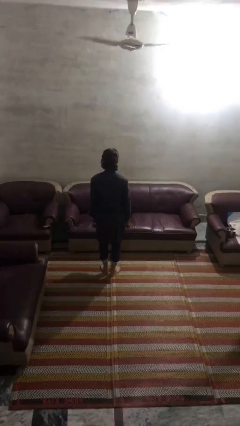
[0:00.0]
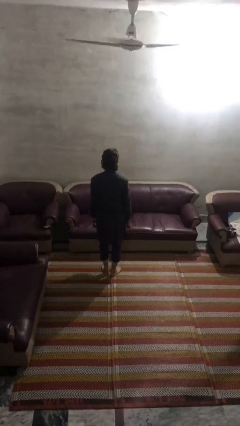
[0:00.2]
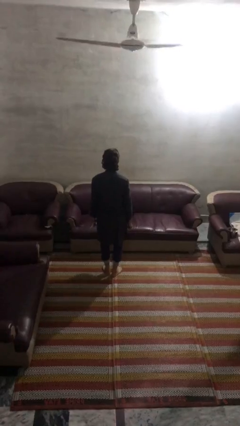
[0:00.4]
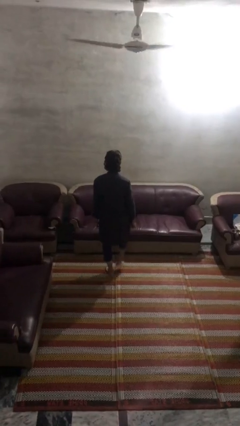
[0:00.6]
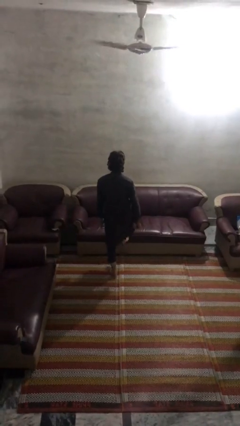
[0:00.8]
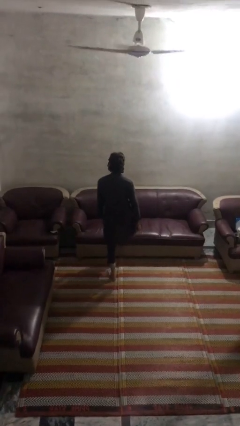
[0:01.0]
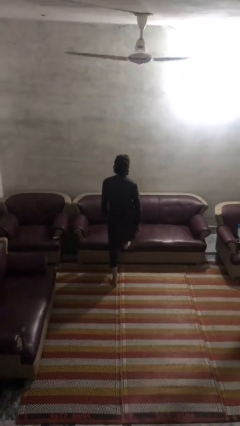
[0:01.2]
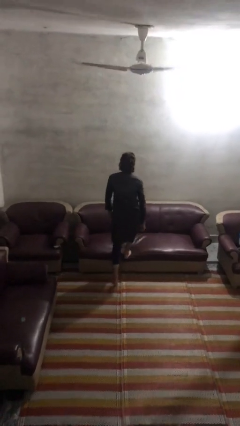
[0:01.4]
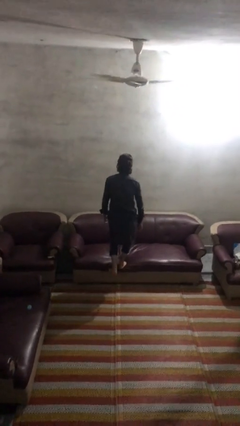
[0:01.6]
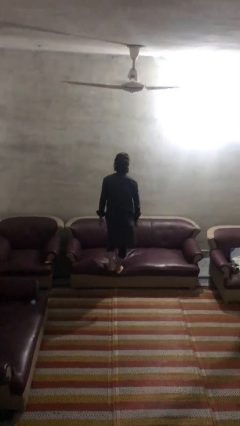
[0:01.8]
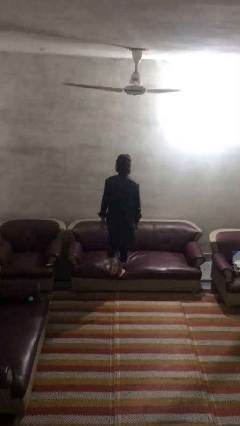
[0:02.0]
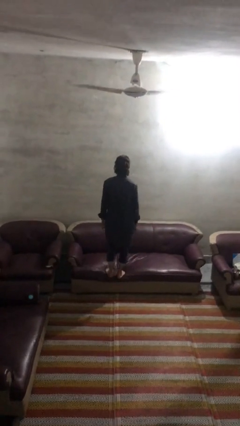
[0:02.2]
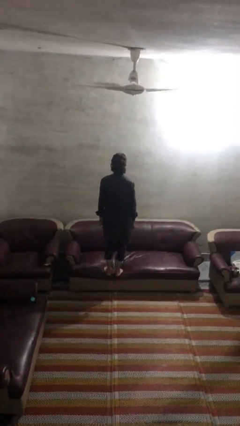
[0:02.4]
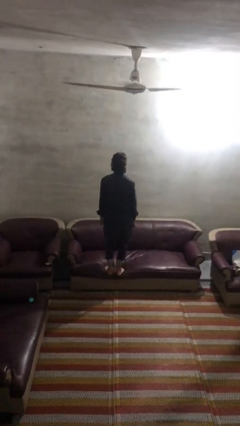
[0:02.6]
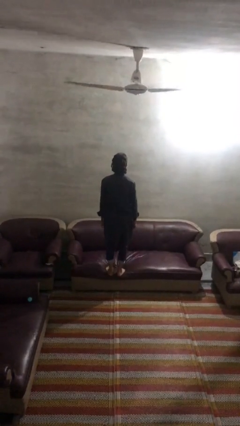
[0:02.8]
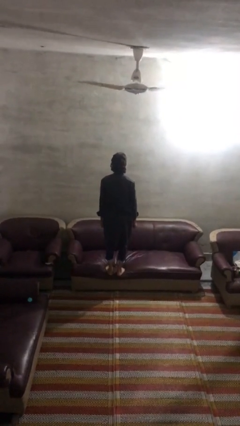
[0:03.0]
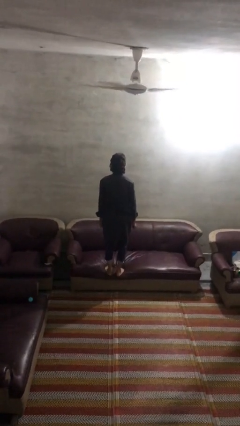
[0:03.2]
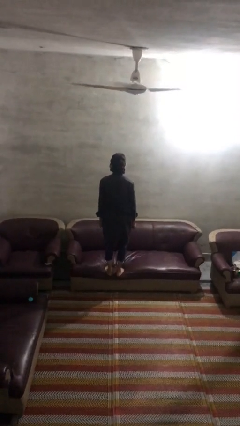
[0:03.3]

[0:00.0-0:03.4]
person climbs on couch

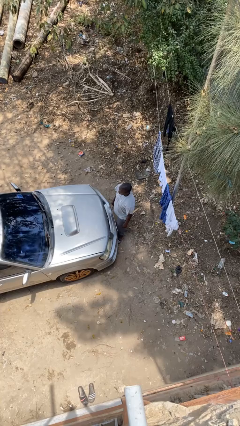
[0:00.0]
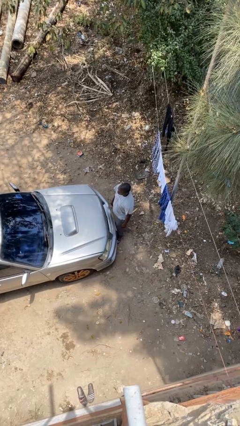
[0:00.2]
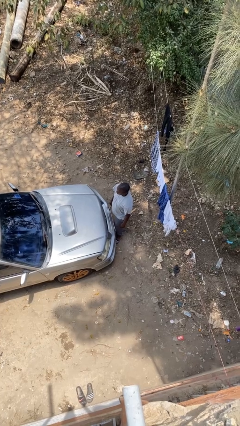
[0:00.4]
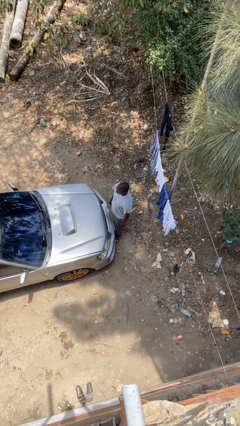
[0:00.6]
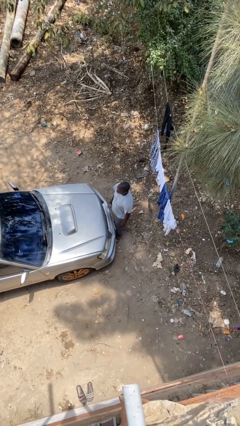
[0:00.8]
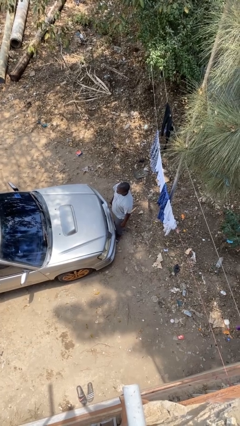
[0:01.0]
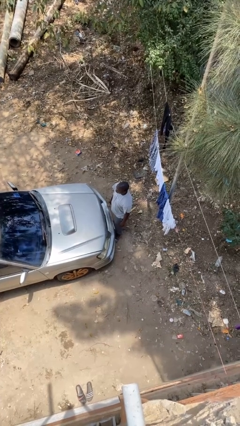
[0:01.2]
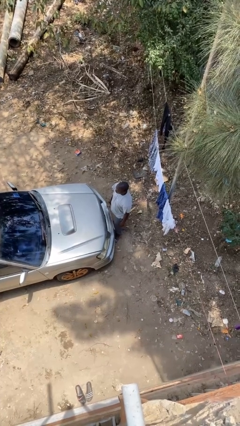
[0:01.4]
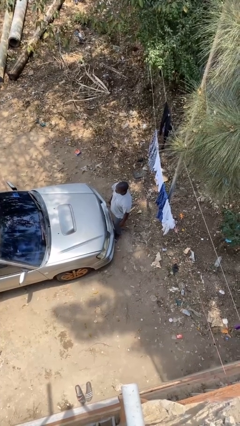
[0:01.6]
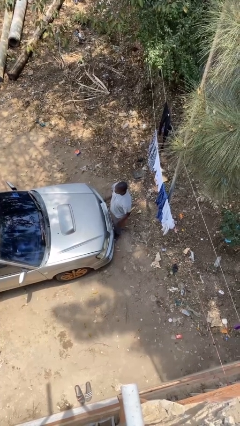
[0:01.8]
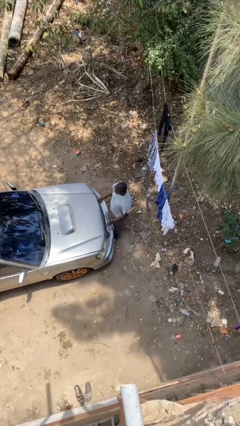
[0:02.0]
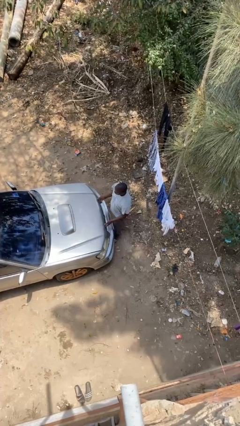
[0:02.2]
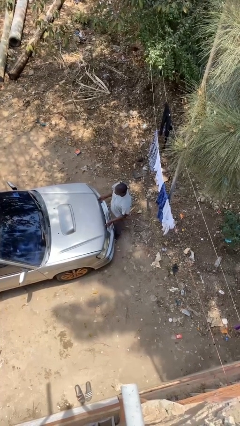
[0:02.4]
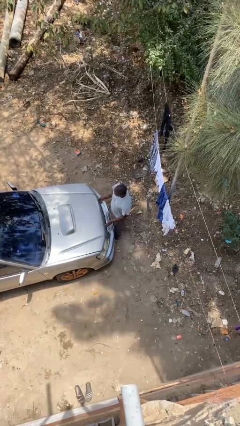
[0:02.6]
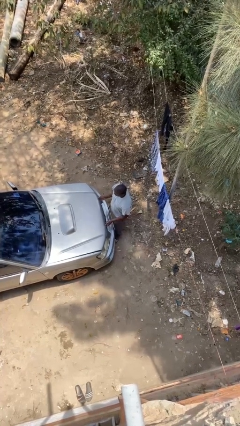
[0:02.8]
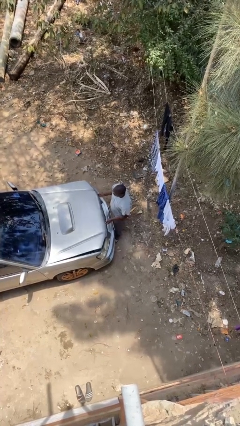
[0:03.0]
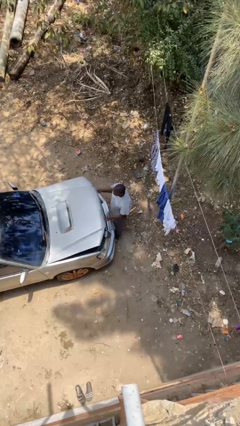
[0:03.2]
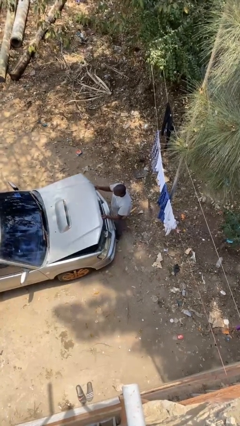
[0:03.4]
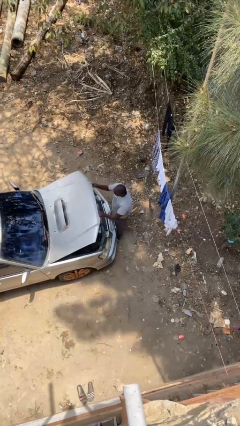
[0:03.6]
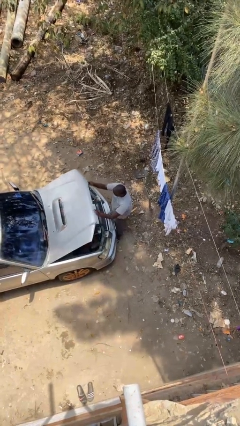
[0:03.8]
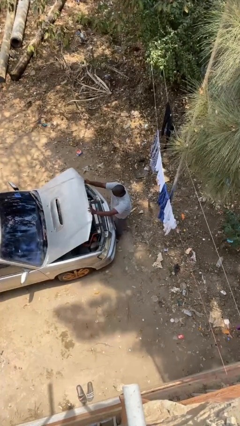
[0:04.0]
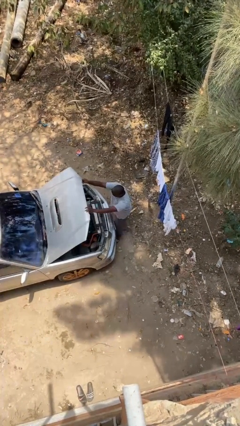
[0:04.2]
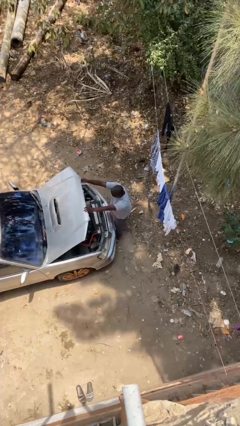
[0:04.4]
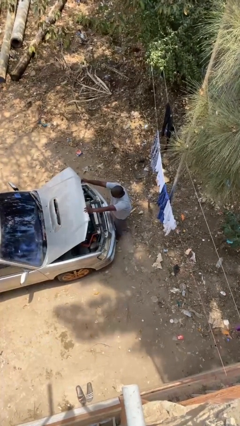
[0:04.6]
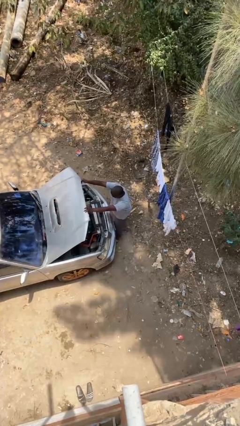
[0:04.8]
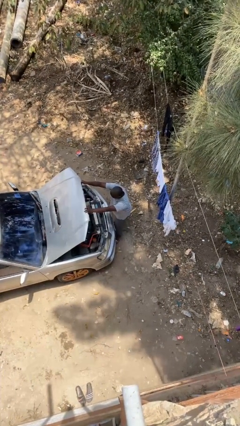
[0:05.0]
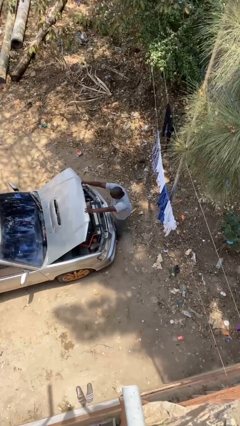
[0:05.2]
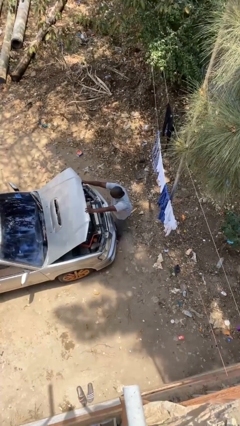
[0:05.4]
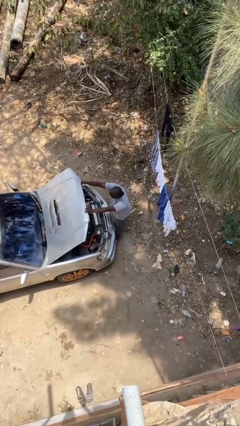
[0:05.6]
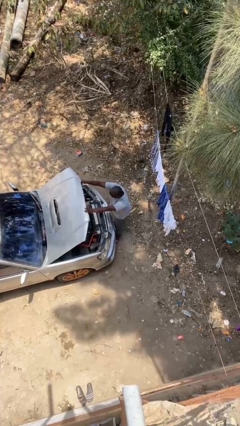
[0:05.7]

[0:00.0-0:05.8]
person opens car hood

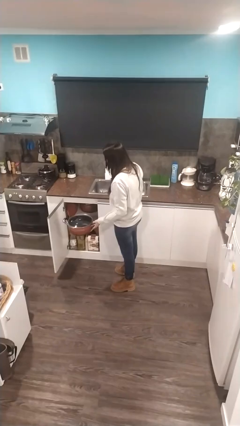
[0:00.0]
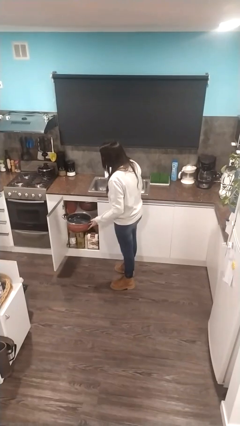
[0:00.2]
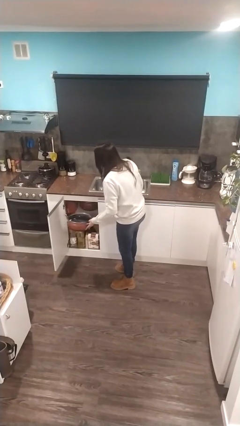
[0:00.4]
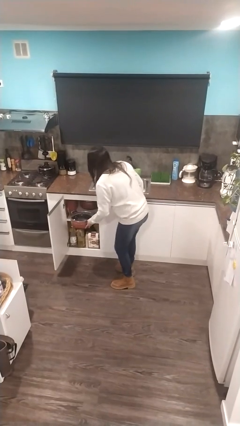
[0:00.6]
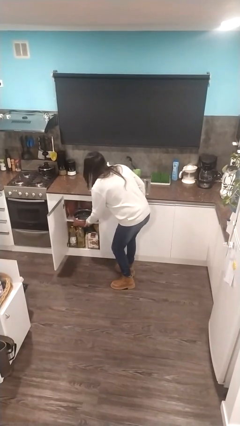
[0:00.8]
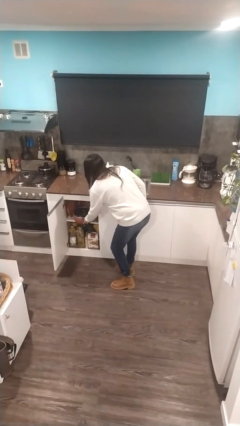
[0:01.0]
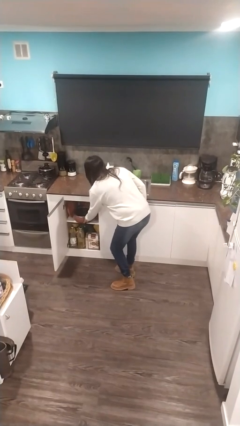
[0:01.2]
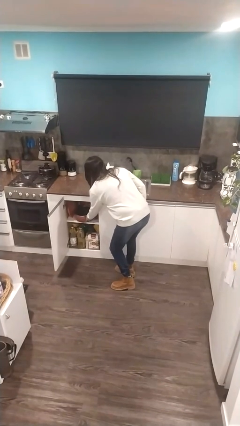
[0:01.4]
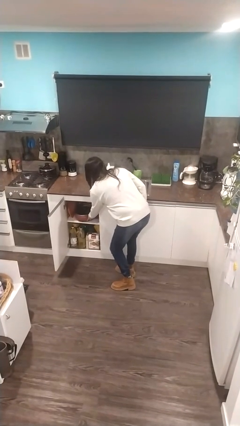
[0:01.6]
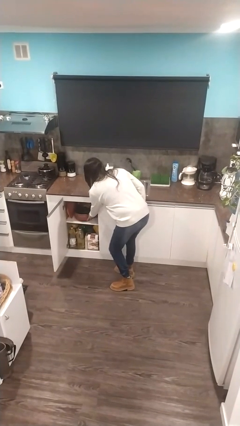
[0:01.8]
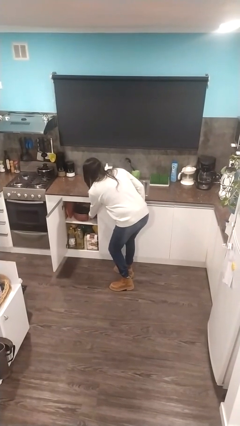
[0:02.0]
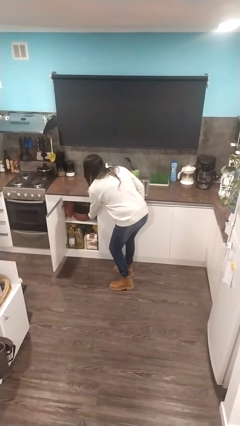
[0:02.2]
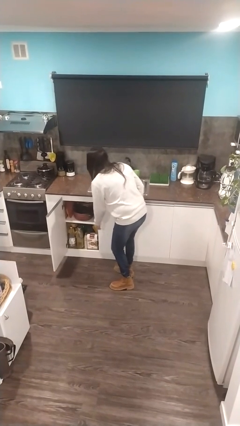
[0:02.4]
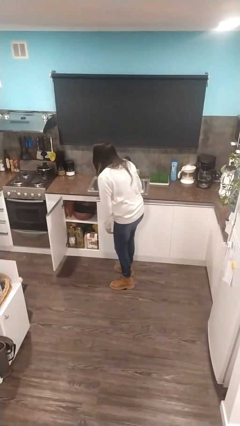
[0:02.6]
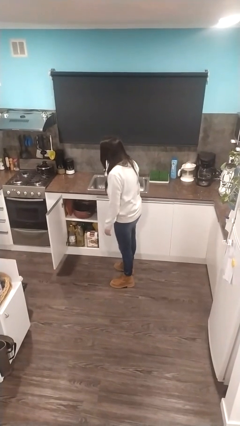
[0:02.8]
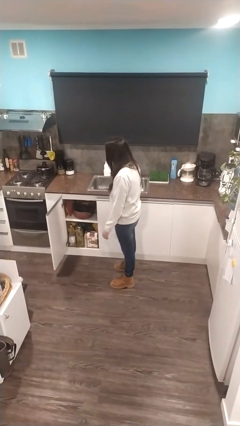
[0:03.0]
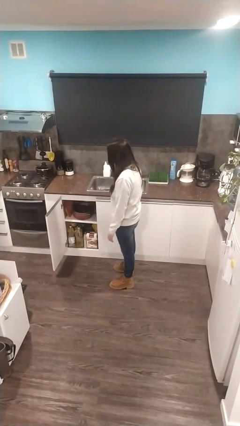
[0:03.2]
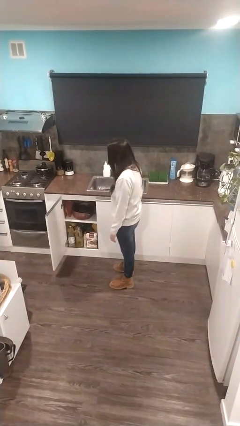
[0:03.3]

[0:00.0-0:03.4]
person puts down object into cabinet

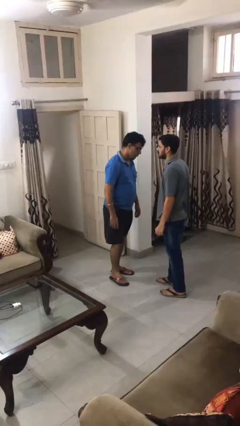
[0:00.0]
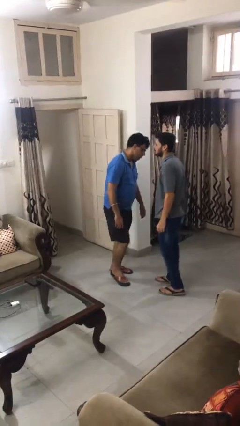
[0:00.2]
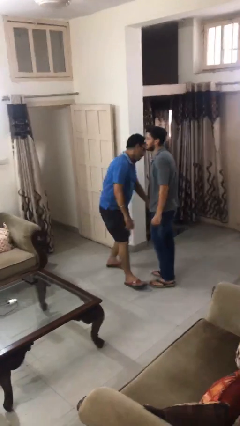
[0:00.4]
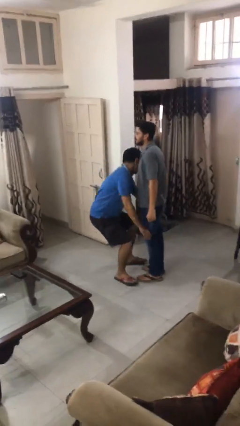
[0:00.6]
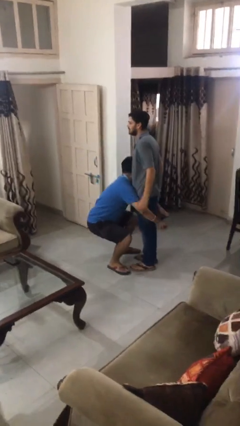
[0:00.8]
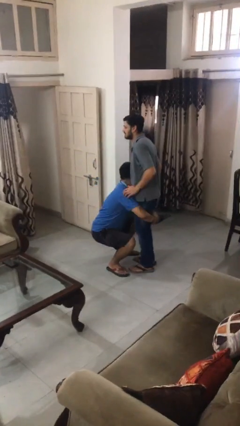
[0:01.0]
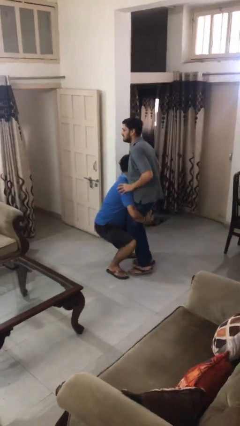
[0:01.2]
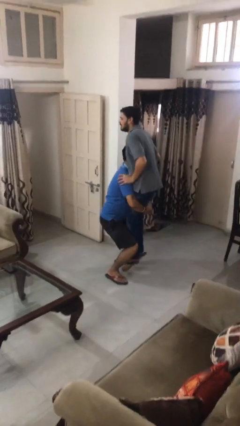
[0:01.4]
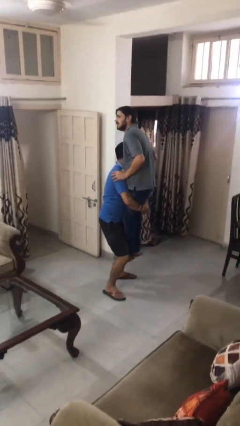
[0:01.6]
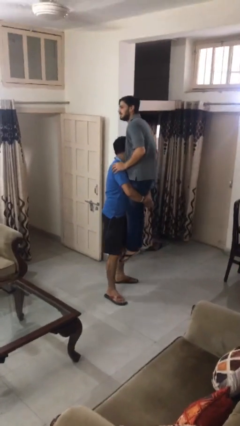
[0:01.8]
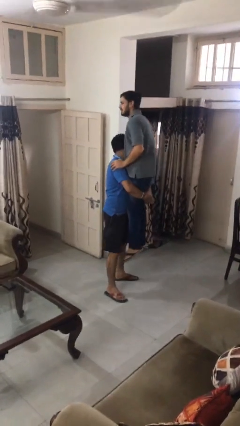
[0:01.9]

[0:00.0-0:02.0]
person picks up person

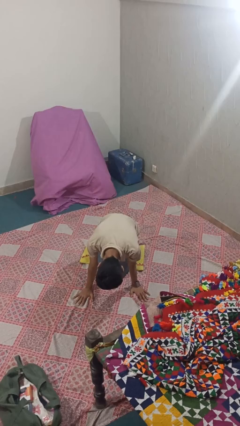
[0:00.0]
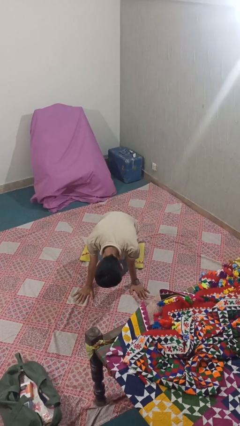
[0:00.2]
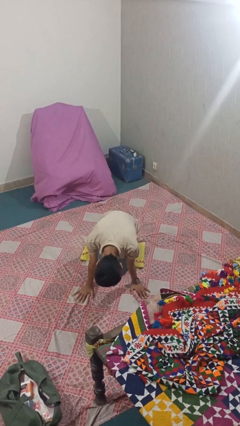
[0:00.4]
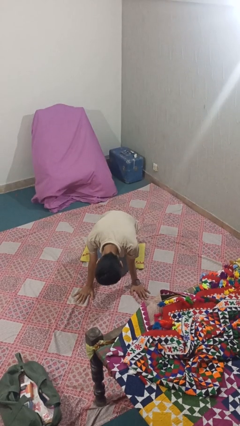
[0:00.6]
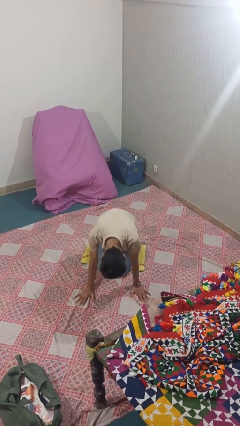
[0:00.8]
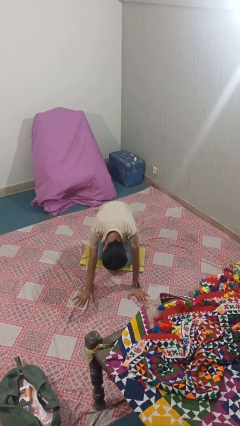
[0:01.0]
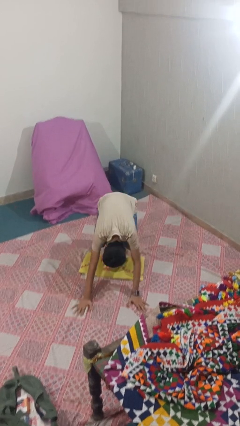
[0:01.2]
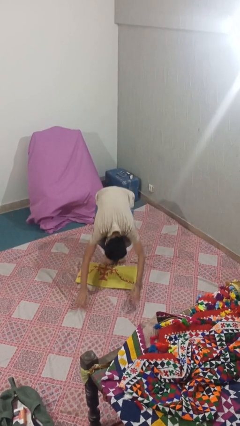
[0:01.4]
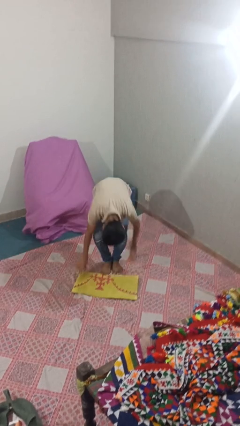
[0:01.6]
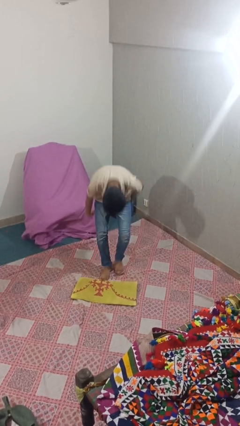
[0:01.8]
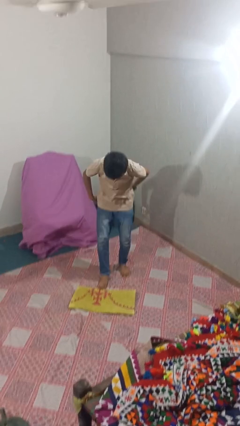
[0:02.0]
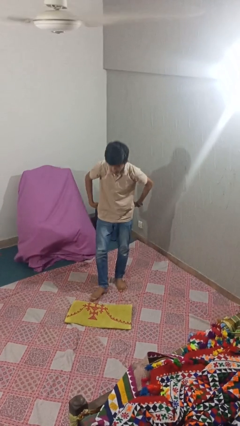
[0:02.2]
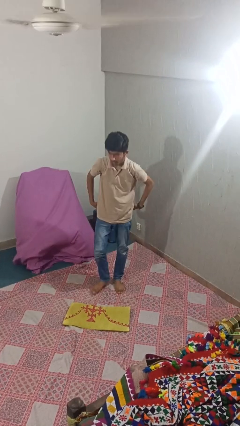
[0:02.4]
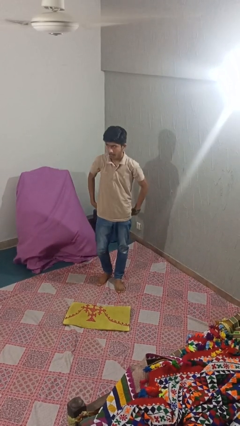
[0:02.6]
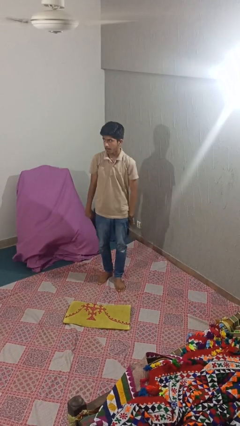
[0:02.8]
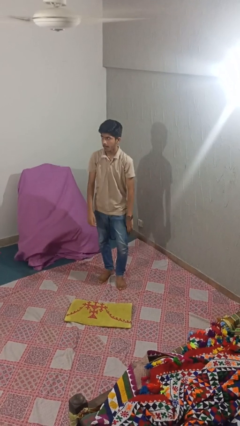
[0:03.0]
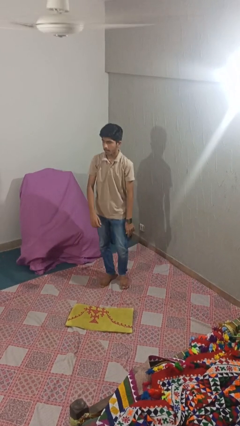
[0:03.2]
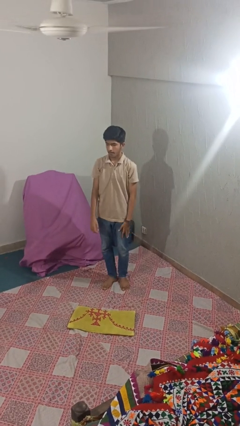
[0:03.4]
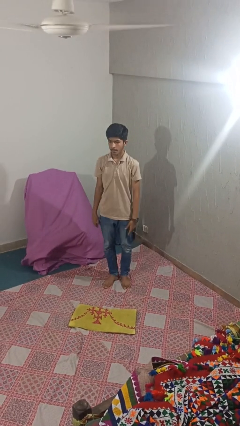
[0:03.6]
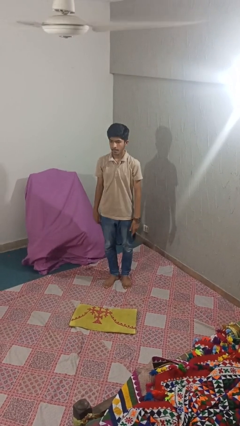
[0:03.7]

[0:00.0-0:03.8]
person stands up from floor
